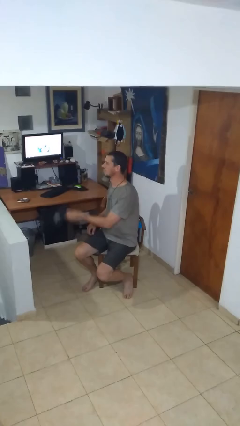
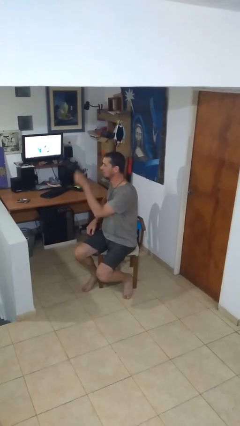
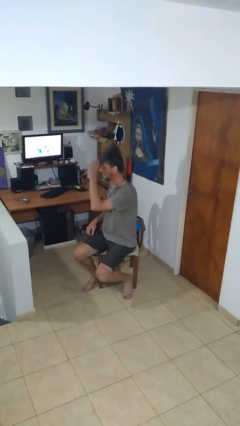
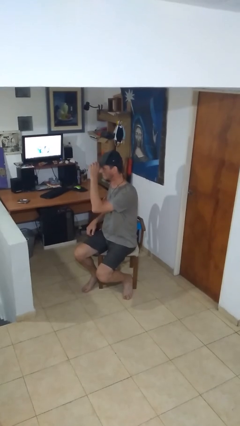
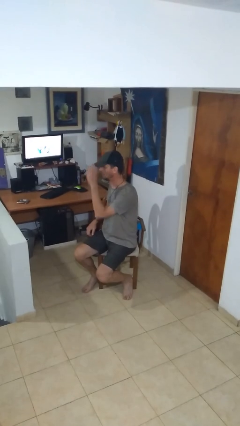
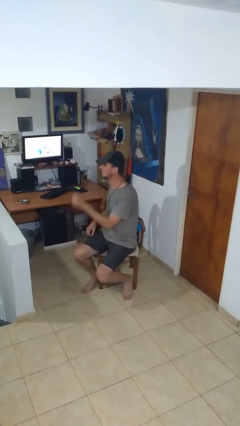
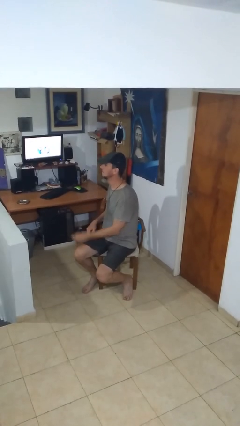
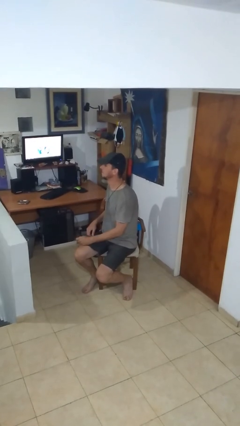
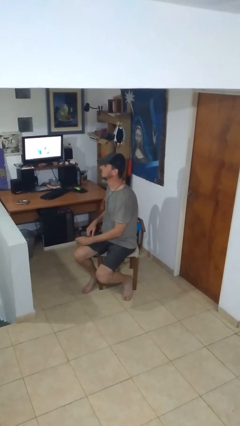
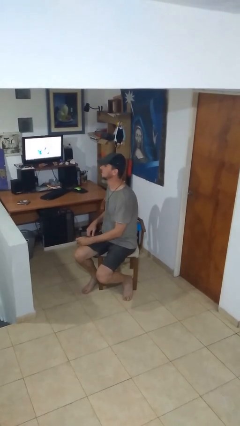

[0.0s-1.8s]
person puts on hat

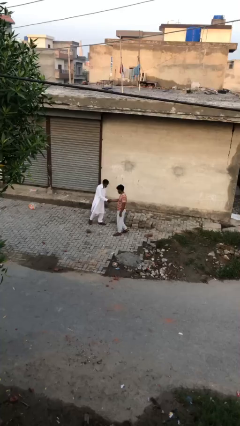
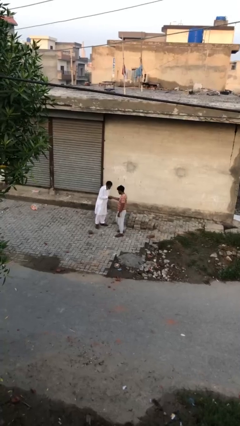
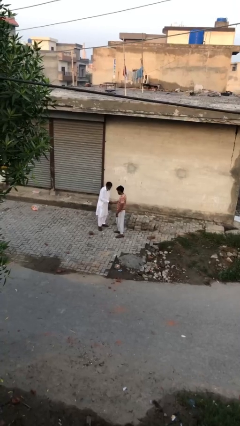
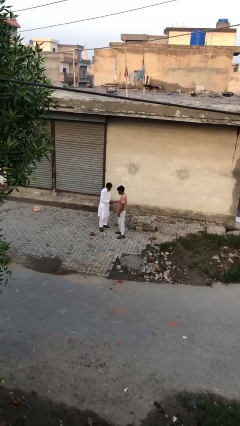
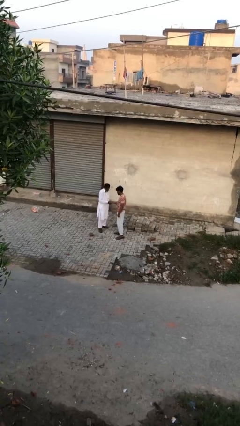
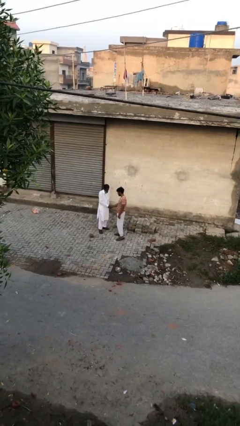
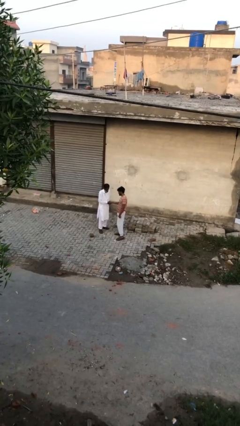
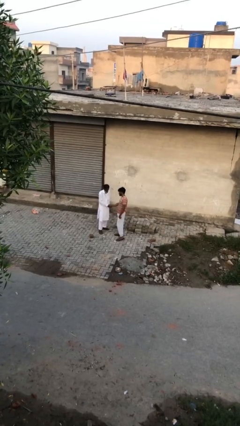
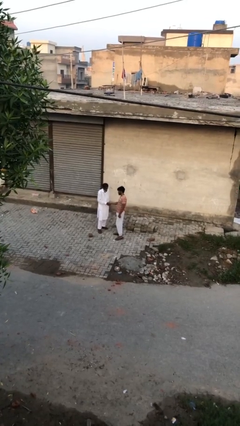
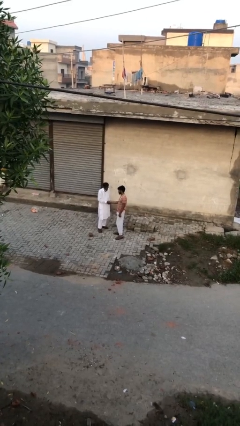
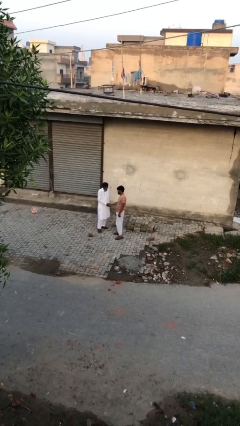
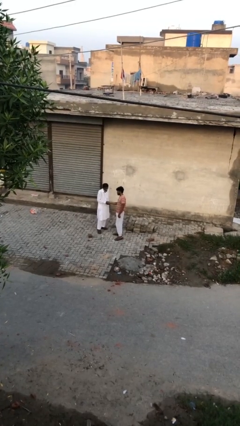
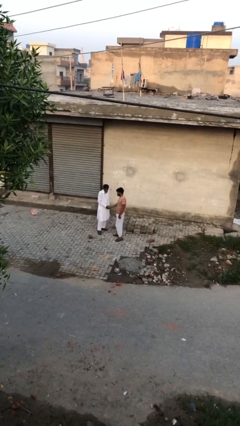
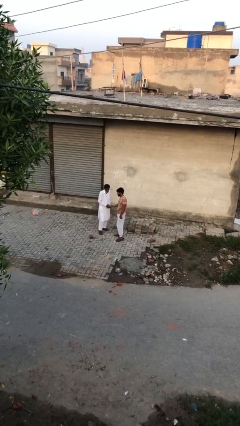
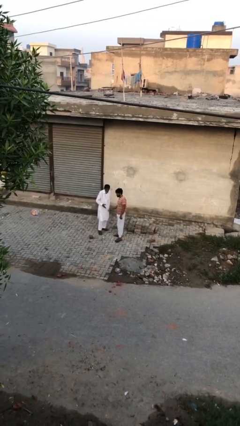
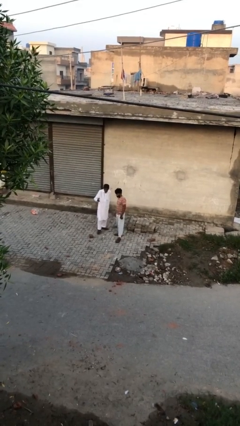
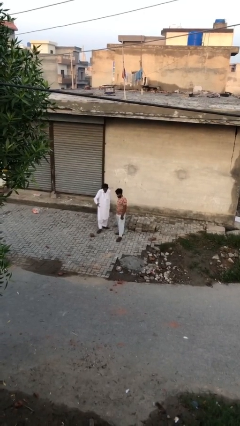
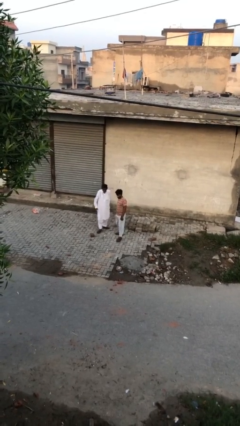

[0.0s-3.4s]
person shakes hand

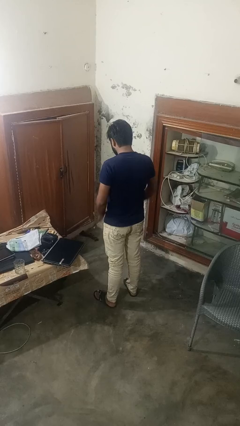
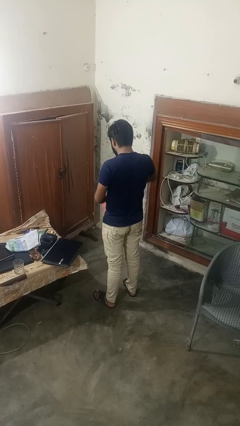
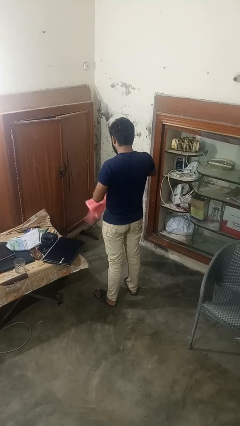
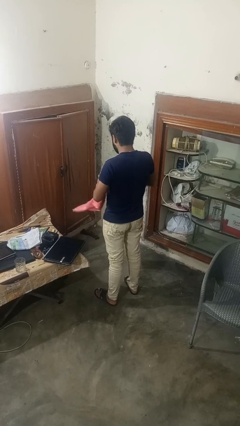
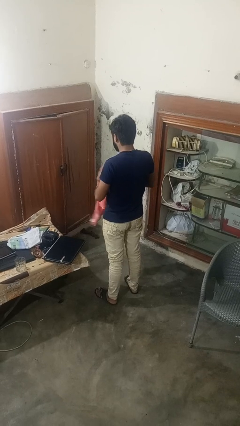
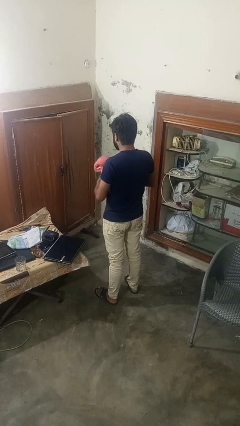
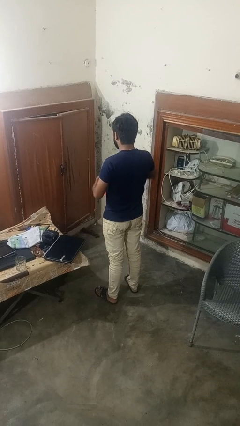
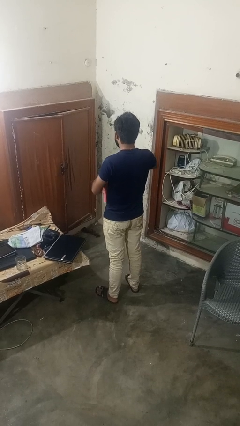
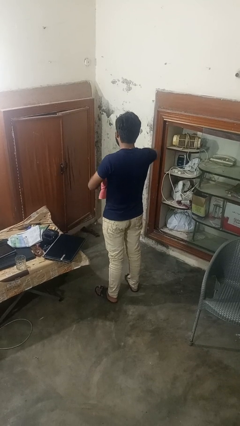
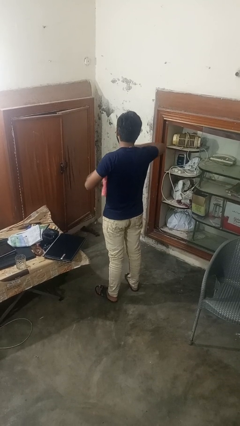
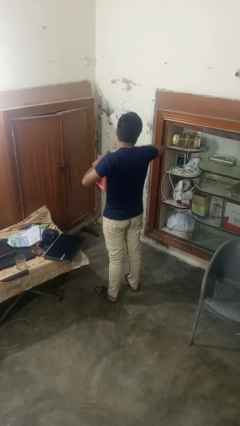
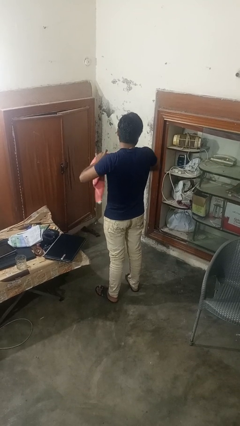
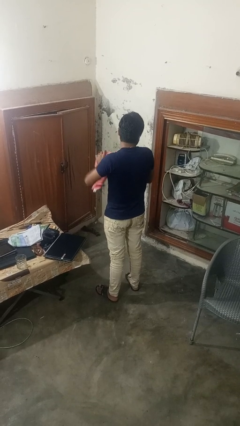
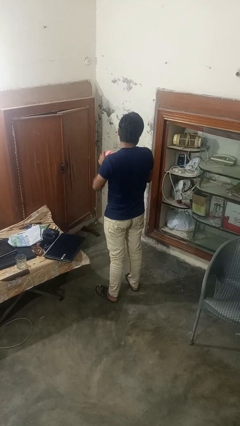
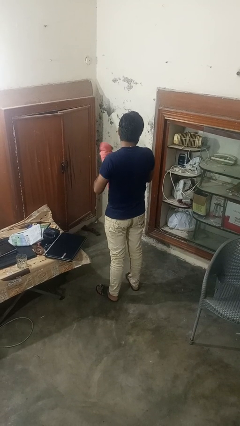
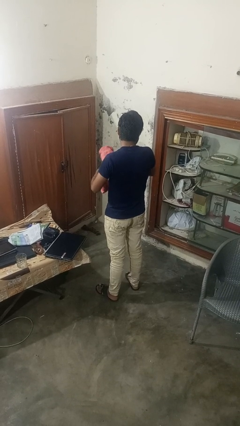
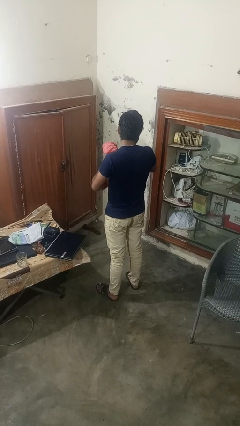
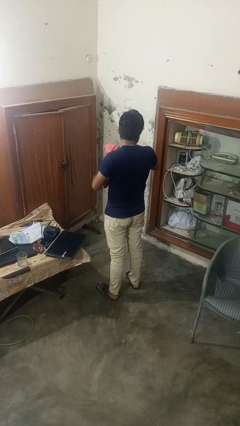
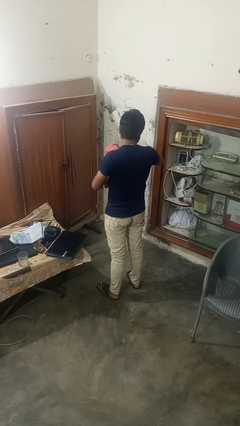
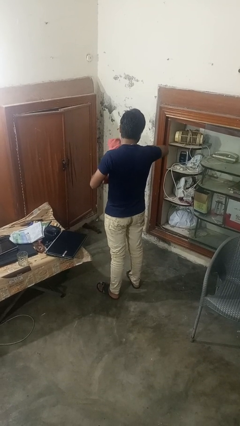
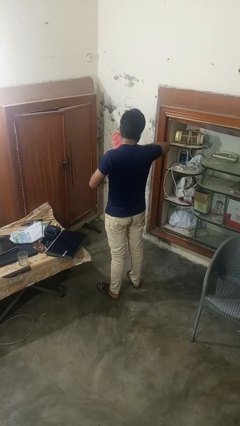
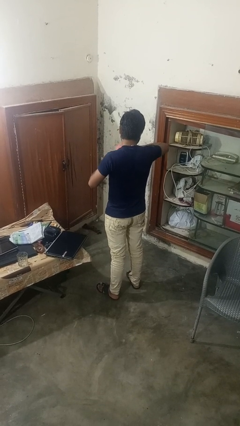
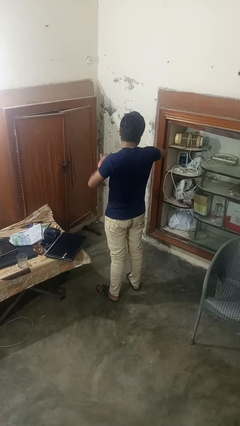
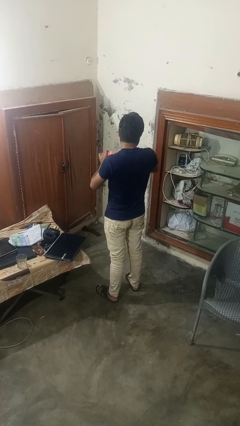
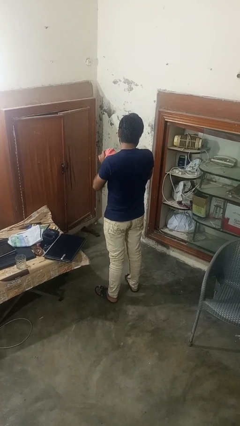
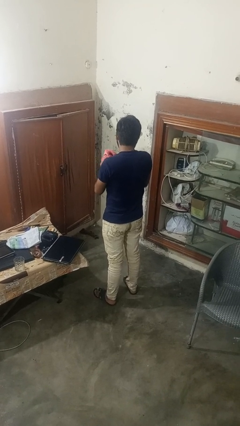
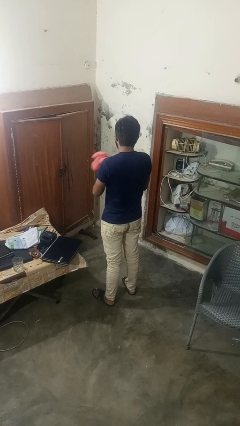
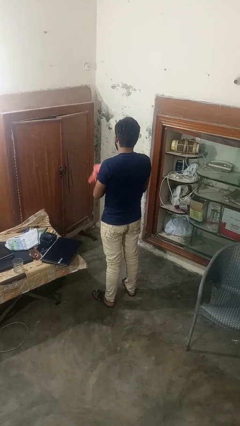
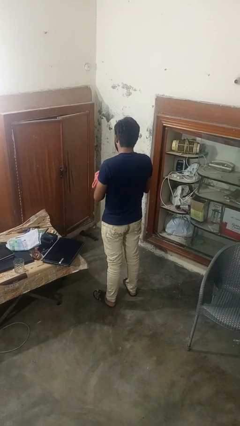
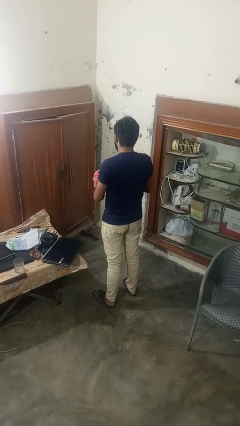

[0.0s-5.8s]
person squeezes object

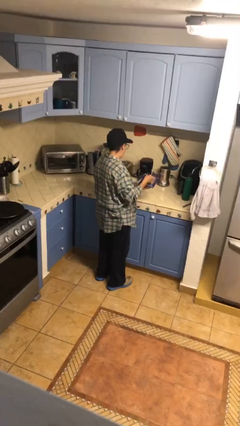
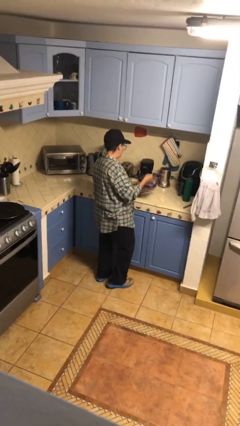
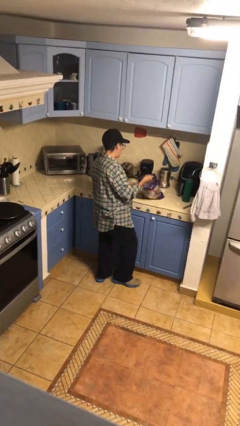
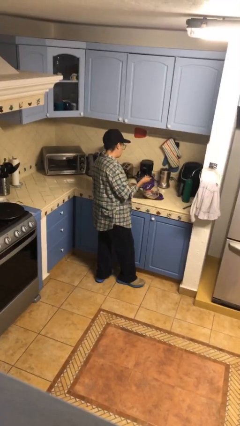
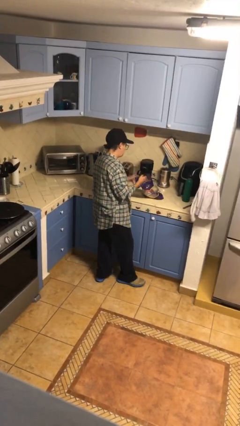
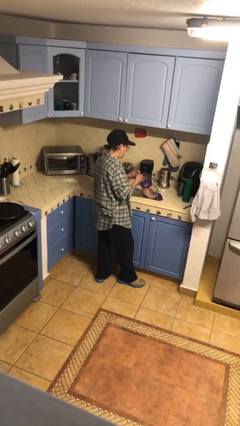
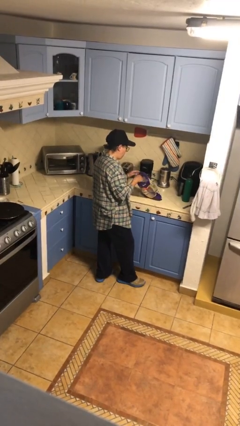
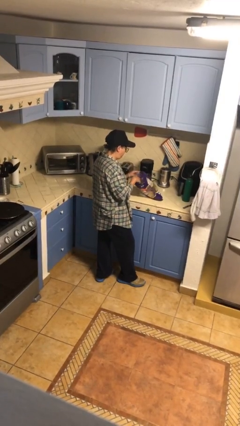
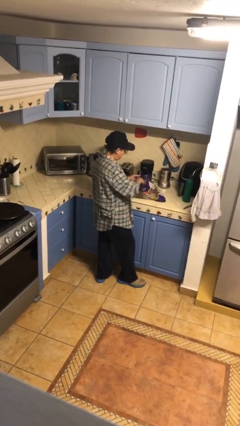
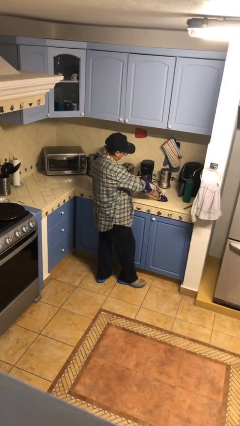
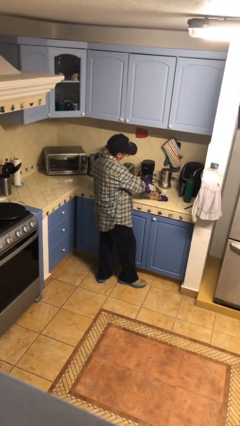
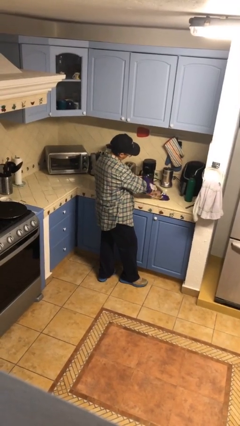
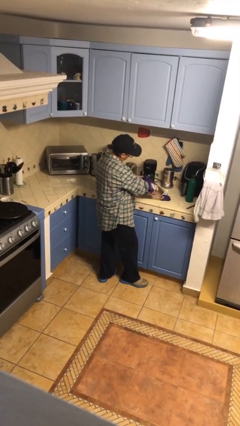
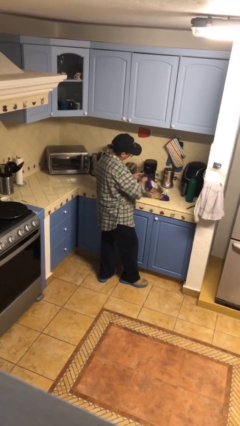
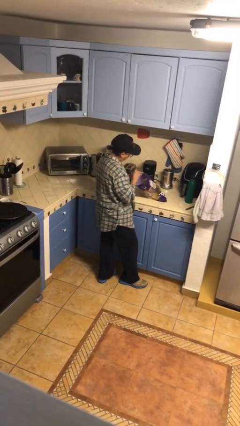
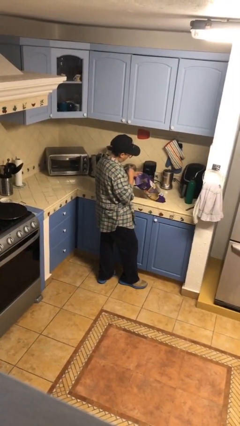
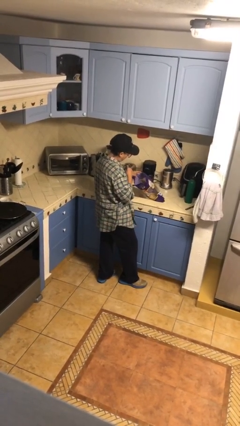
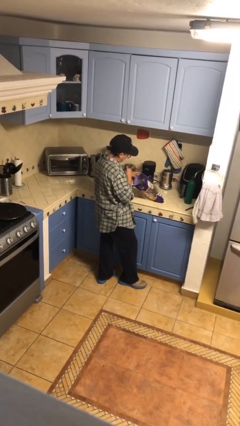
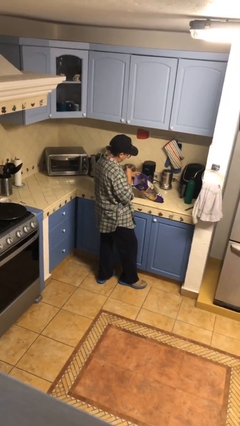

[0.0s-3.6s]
person eats snack from bag

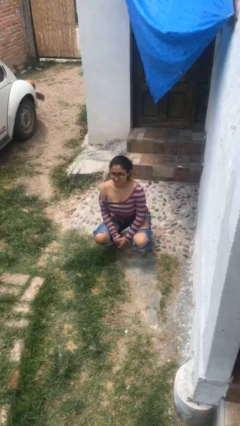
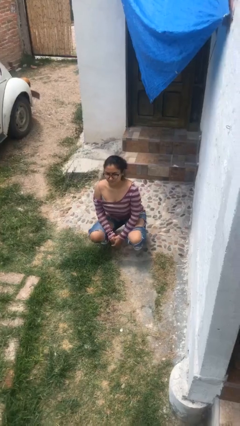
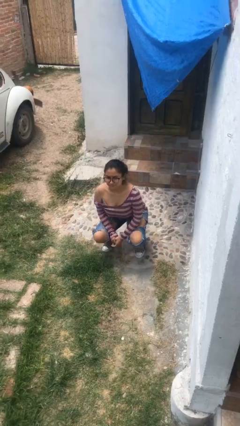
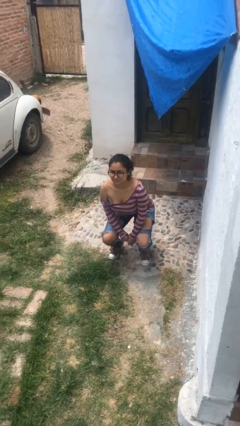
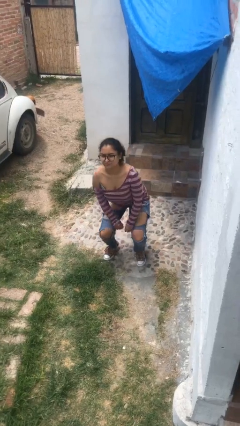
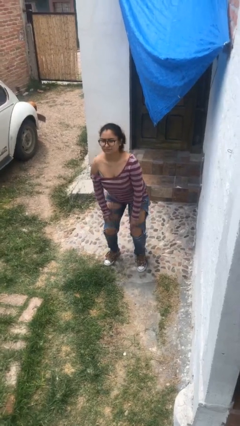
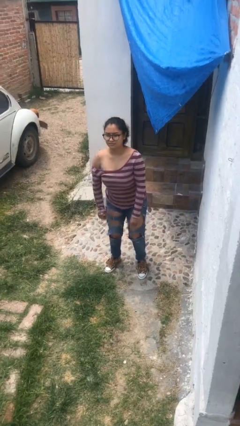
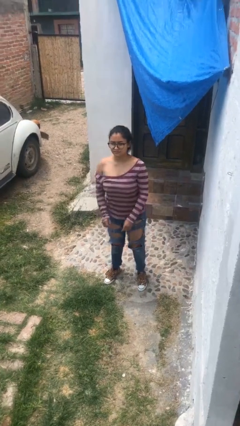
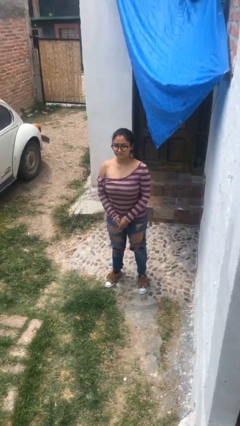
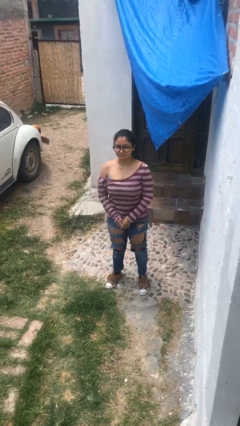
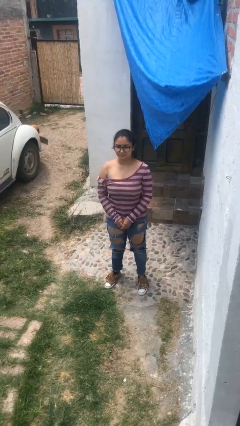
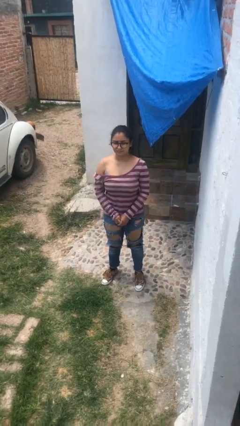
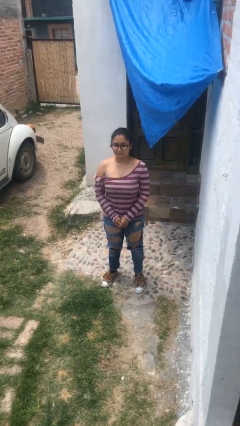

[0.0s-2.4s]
person stands up

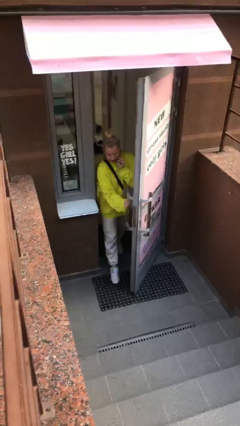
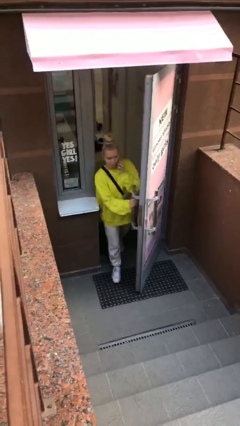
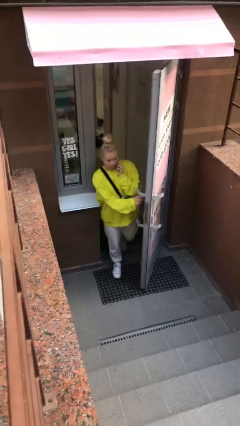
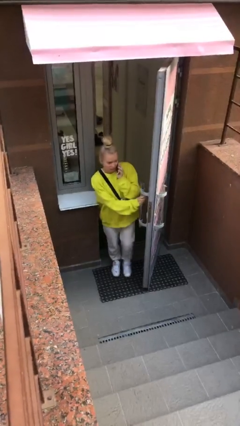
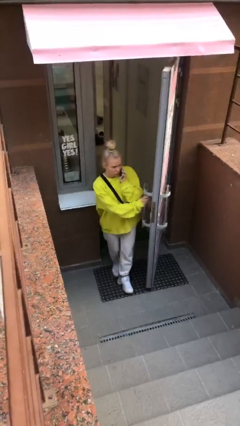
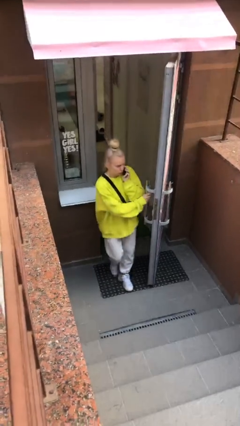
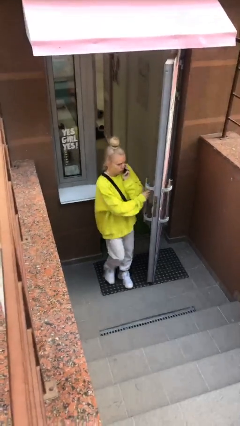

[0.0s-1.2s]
person enters scene through structure
